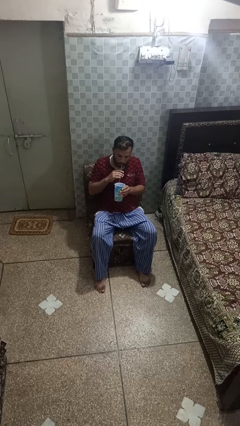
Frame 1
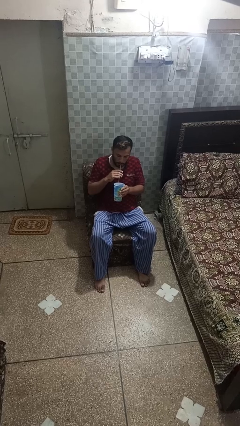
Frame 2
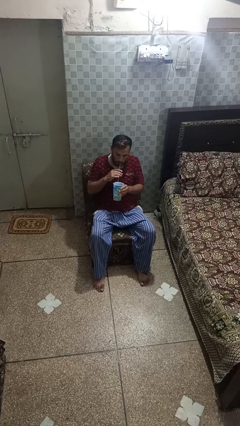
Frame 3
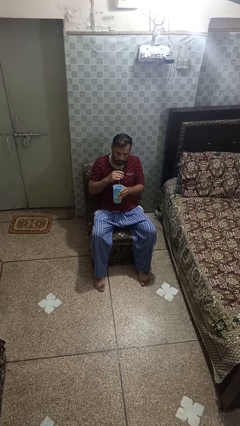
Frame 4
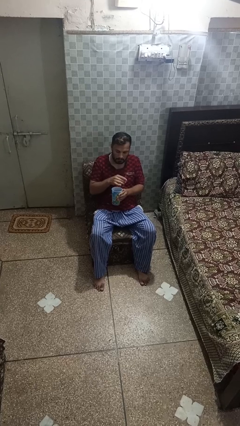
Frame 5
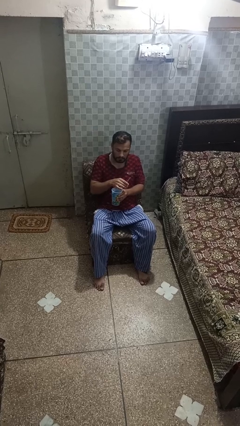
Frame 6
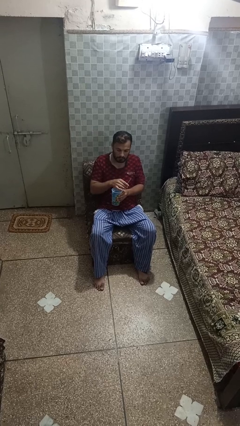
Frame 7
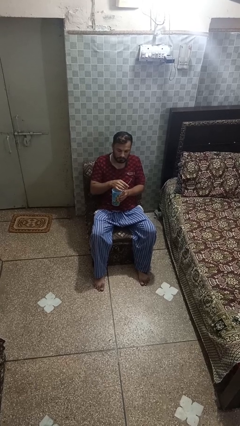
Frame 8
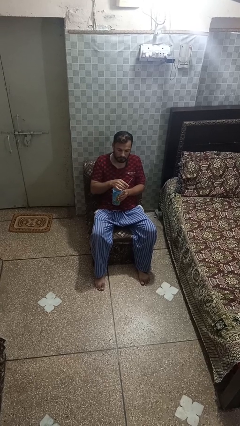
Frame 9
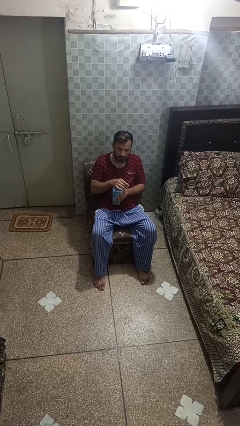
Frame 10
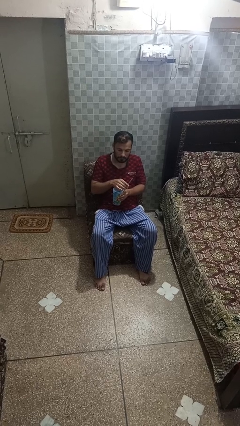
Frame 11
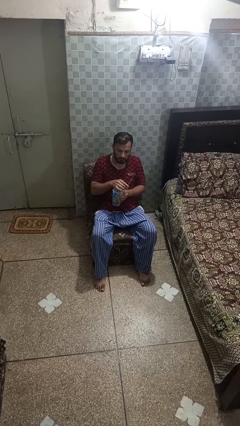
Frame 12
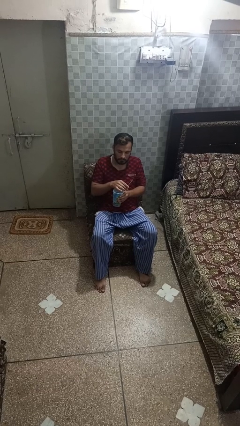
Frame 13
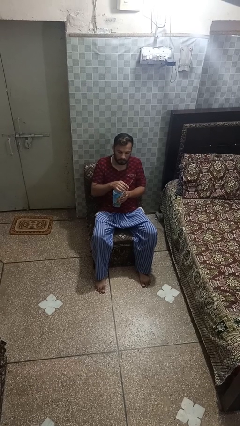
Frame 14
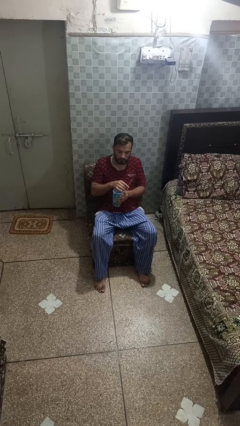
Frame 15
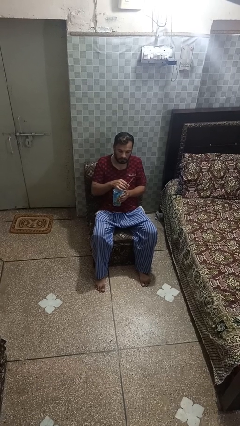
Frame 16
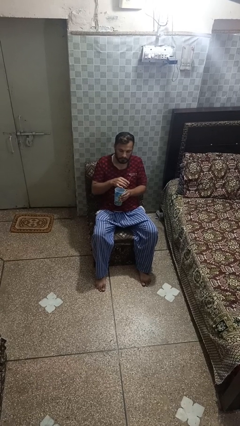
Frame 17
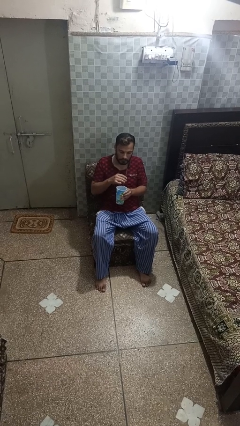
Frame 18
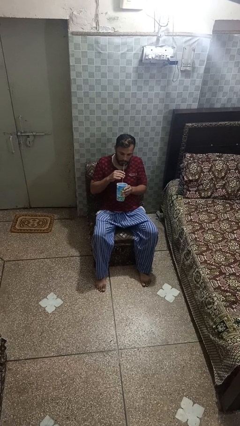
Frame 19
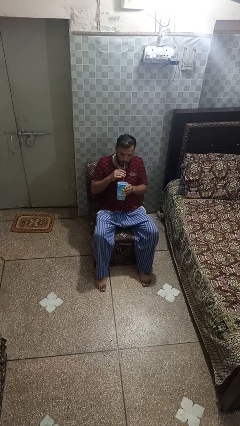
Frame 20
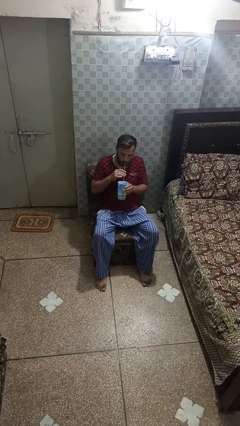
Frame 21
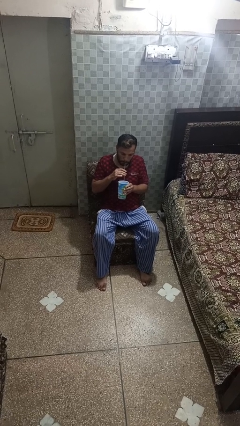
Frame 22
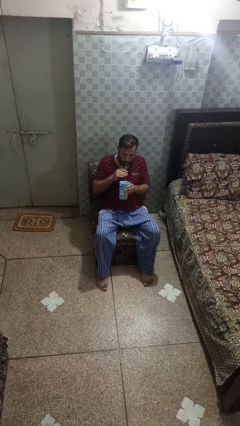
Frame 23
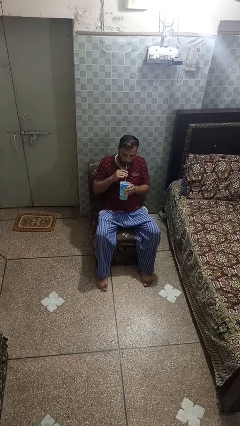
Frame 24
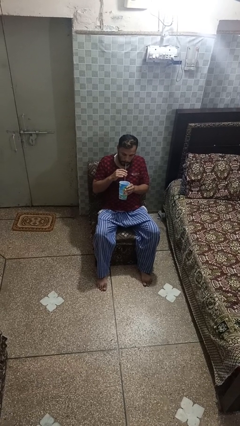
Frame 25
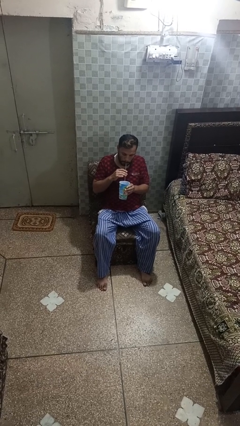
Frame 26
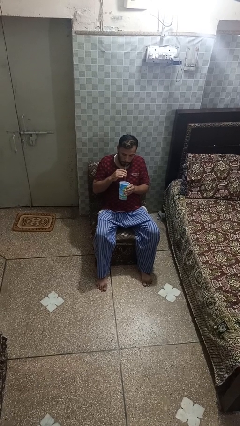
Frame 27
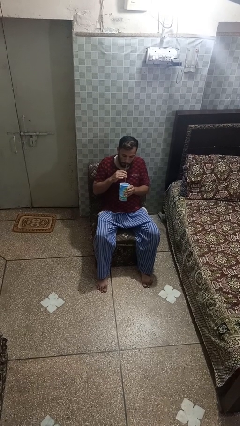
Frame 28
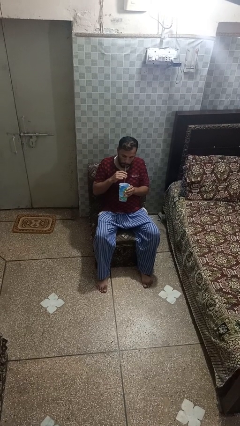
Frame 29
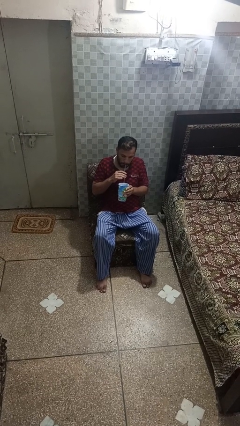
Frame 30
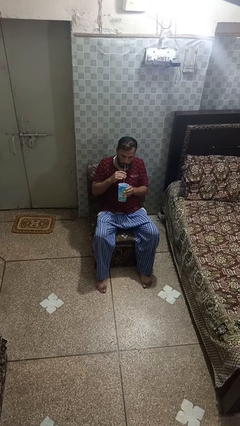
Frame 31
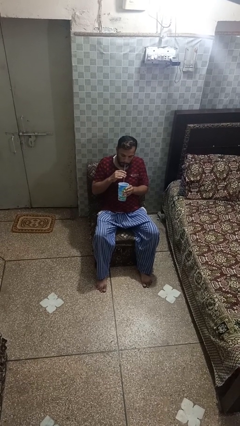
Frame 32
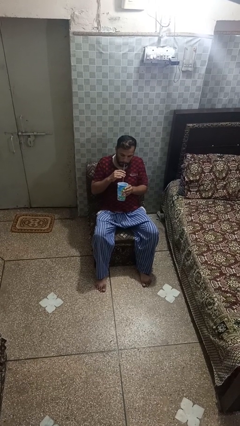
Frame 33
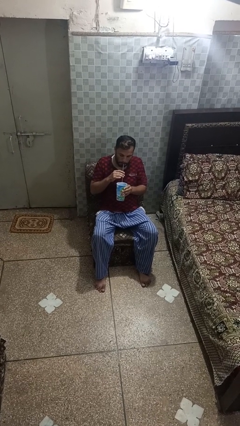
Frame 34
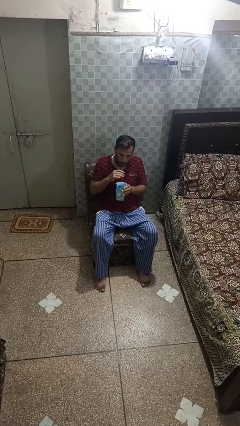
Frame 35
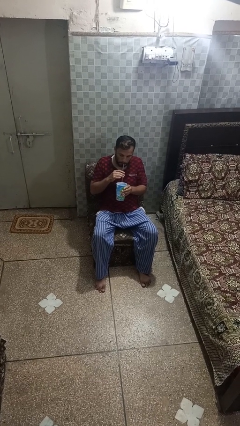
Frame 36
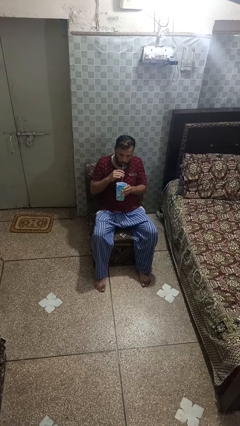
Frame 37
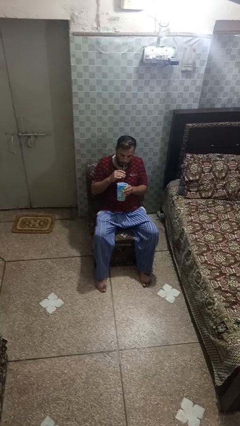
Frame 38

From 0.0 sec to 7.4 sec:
person drinks from straw

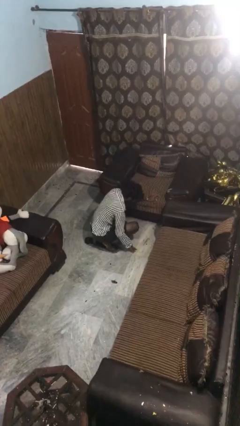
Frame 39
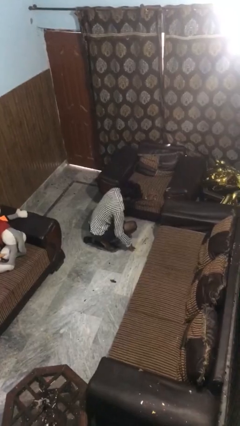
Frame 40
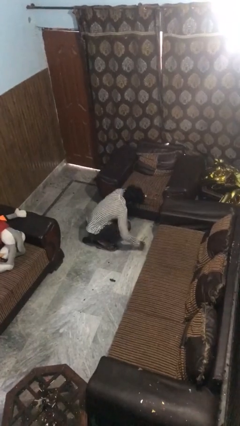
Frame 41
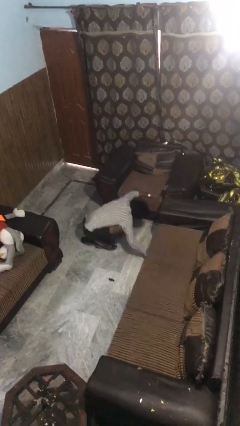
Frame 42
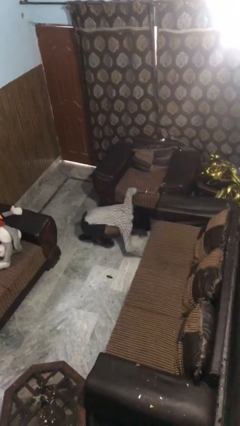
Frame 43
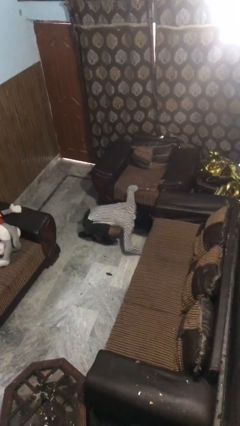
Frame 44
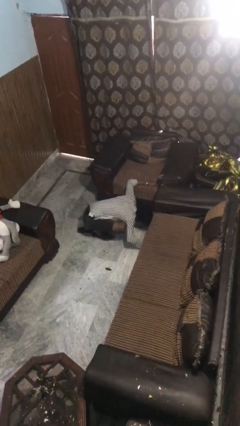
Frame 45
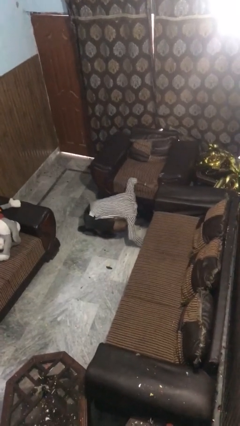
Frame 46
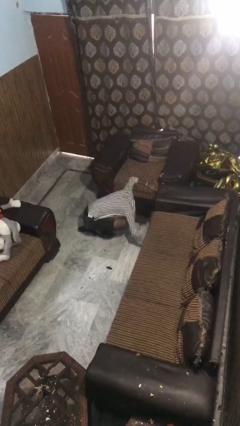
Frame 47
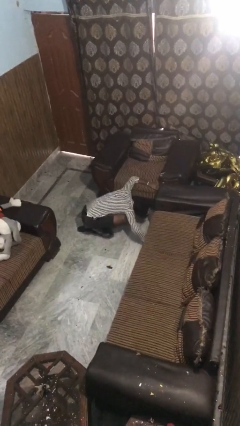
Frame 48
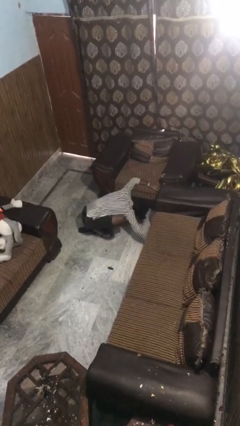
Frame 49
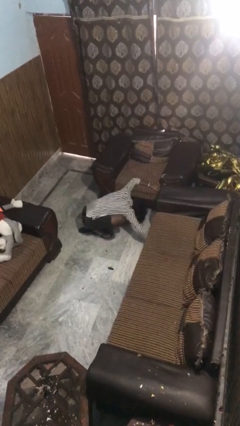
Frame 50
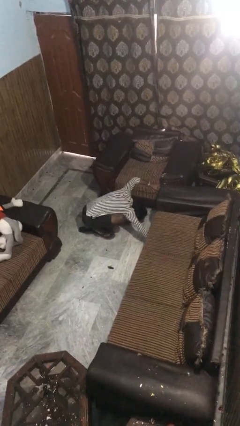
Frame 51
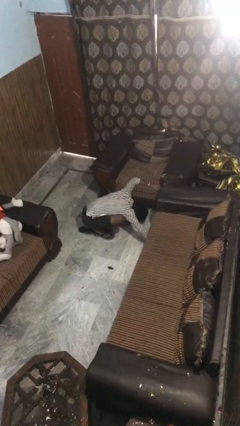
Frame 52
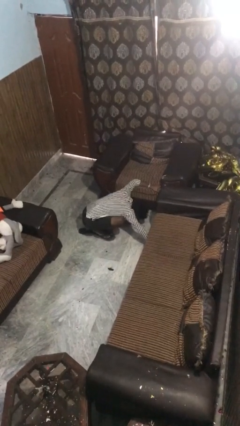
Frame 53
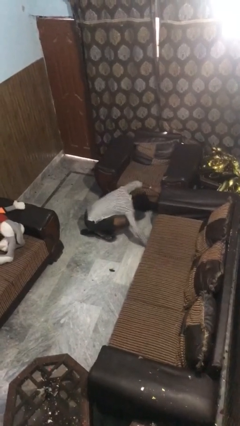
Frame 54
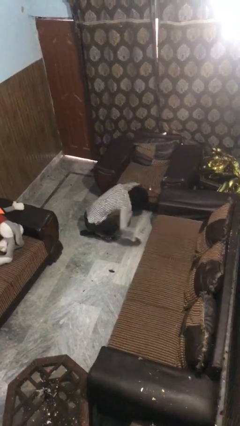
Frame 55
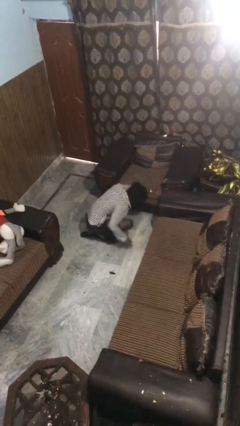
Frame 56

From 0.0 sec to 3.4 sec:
person searches under couch

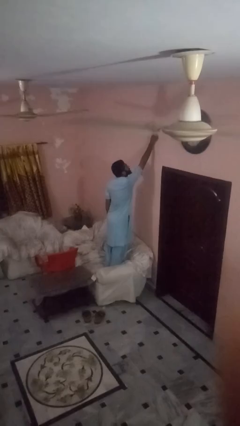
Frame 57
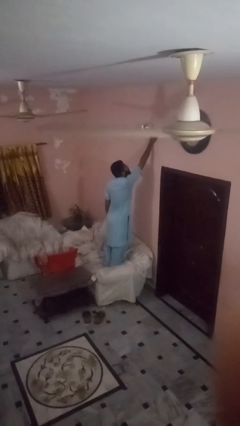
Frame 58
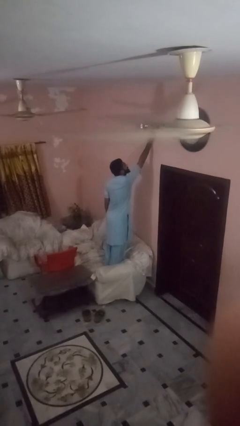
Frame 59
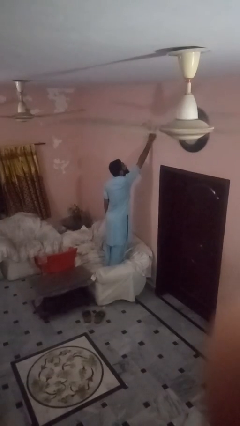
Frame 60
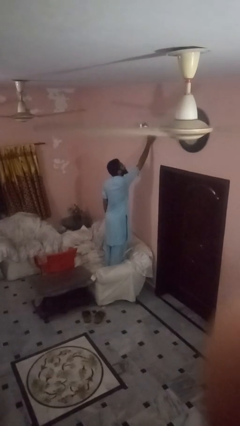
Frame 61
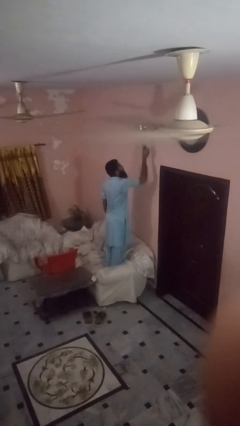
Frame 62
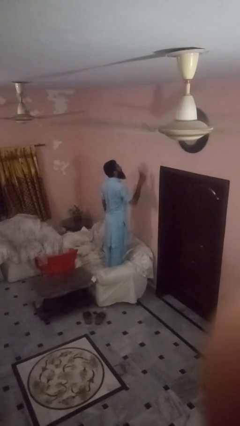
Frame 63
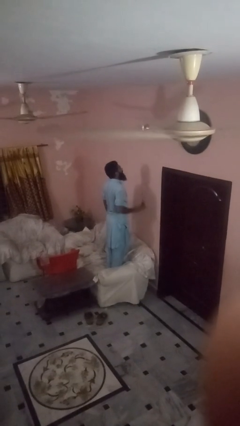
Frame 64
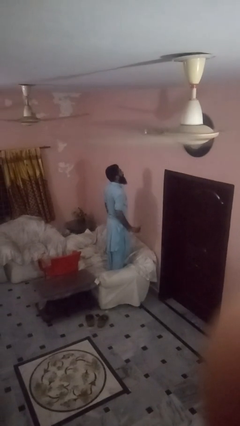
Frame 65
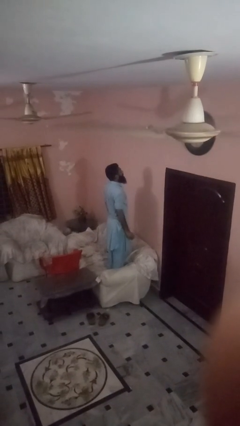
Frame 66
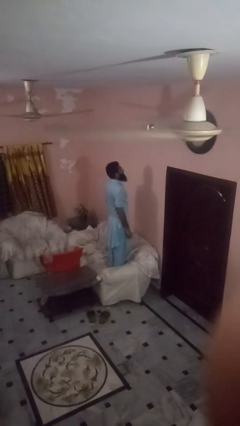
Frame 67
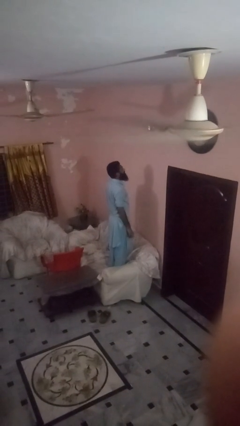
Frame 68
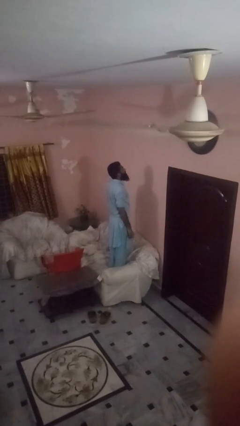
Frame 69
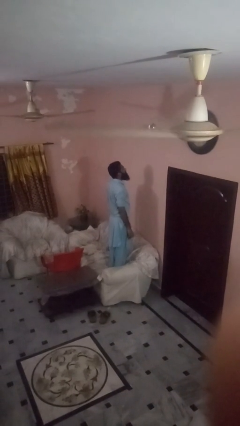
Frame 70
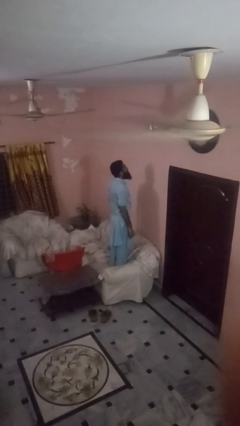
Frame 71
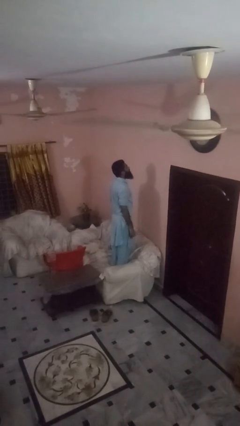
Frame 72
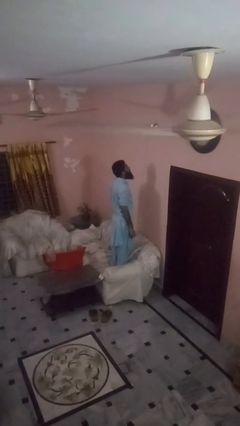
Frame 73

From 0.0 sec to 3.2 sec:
person takes down smoke detector

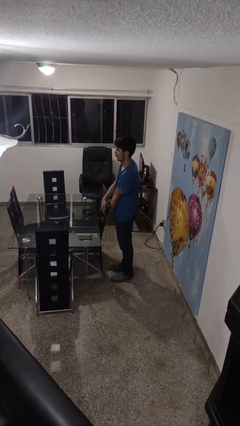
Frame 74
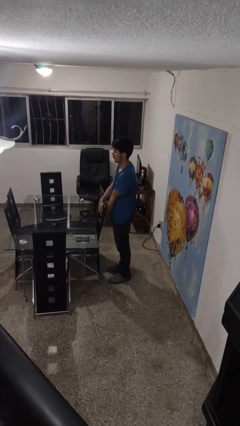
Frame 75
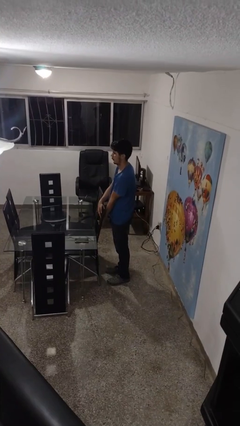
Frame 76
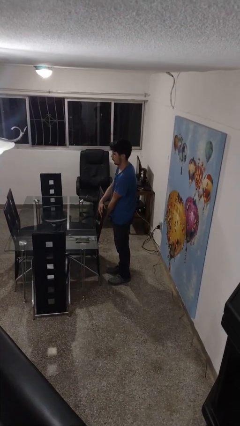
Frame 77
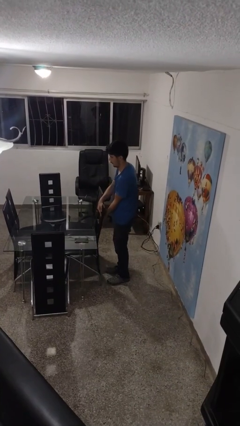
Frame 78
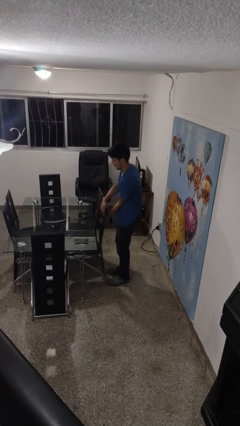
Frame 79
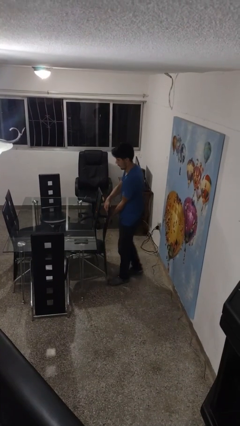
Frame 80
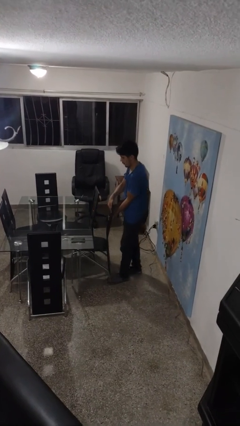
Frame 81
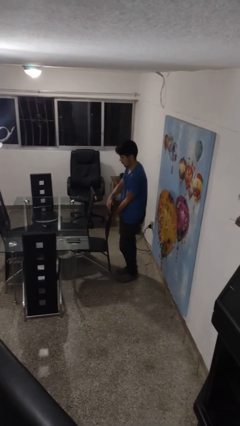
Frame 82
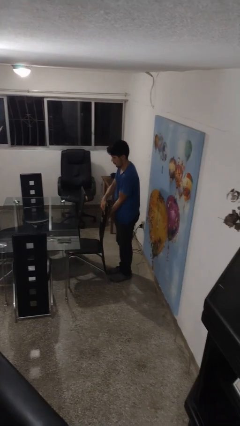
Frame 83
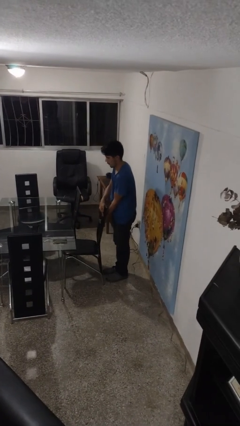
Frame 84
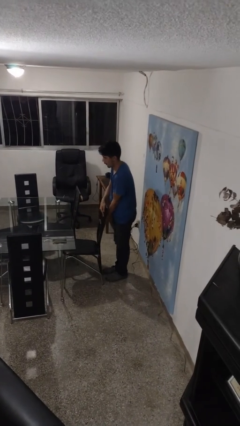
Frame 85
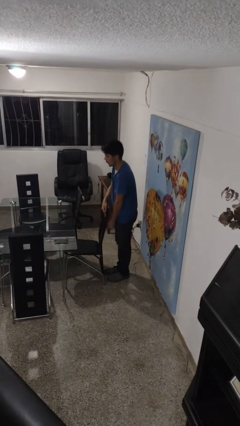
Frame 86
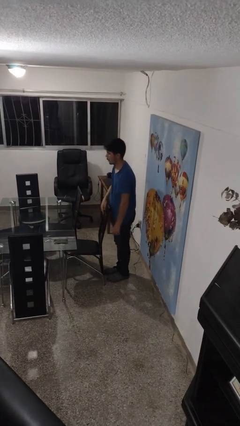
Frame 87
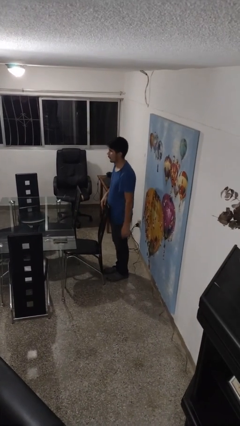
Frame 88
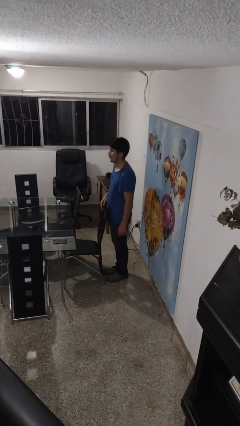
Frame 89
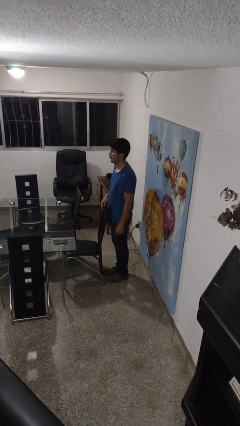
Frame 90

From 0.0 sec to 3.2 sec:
person pulls out chair

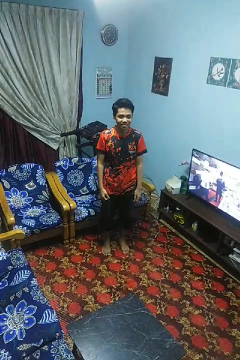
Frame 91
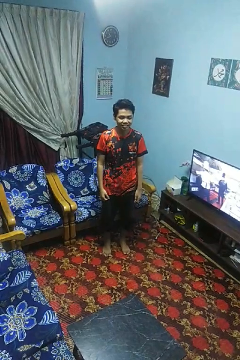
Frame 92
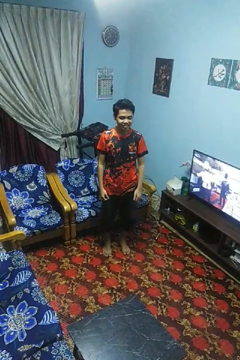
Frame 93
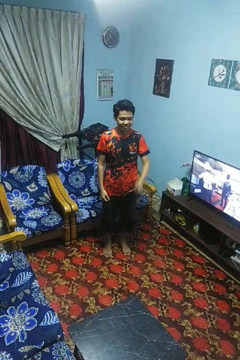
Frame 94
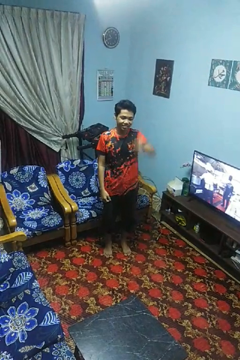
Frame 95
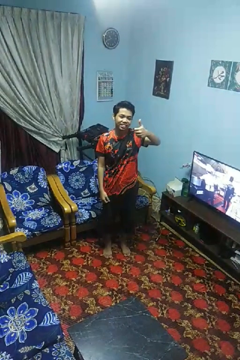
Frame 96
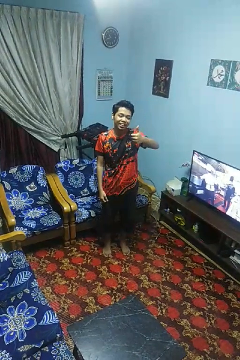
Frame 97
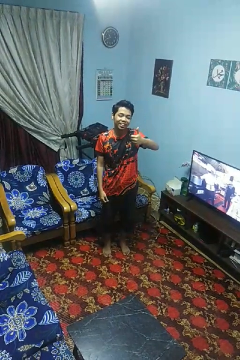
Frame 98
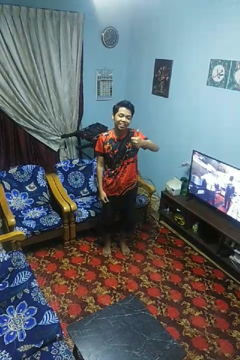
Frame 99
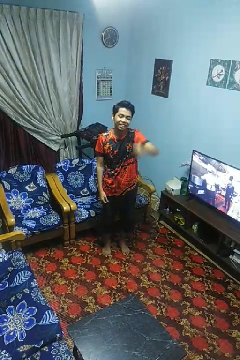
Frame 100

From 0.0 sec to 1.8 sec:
person gestures thumbs up
